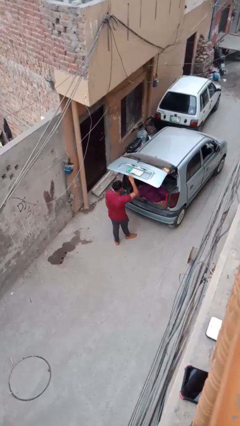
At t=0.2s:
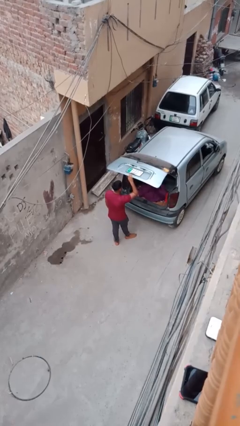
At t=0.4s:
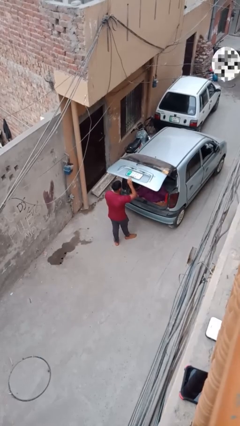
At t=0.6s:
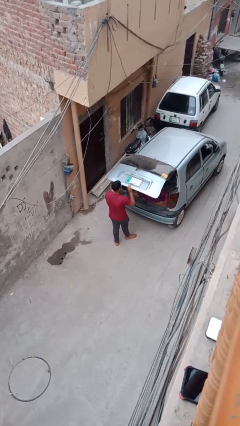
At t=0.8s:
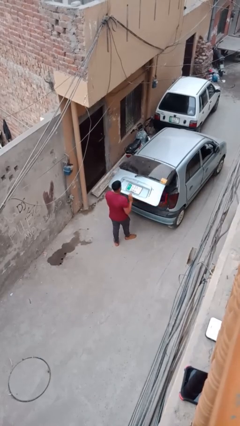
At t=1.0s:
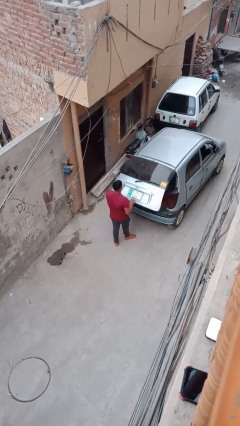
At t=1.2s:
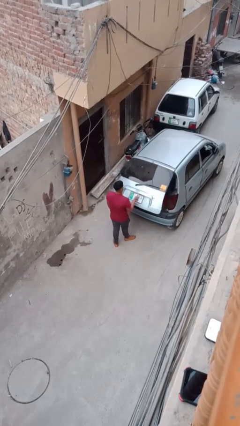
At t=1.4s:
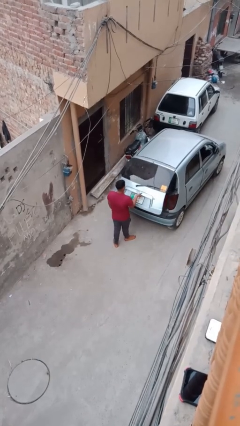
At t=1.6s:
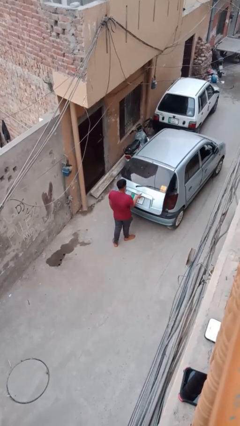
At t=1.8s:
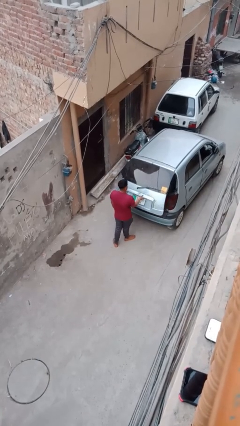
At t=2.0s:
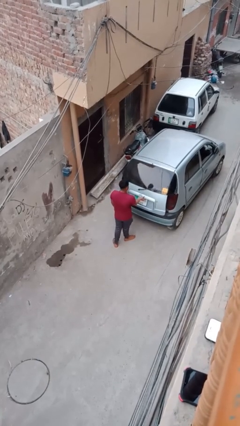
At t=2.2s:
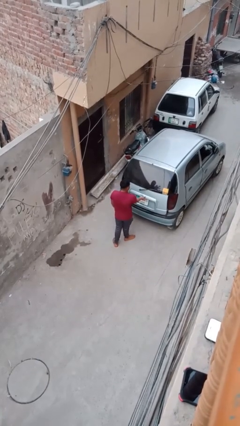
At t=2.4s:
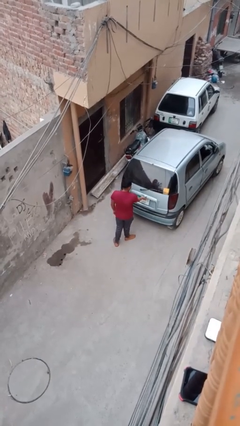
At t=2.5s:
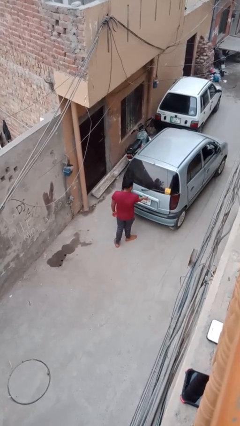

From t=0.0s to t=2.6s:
person closes car trunk

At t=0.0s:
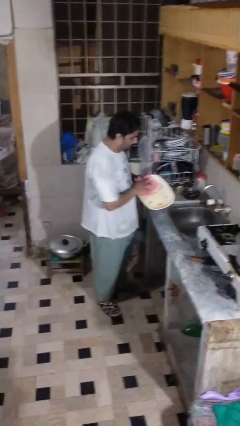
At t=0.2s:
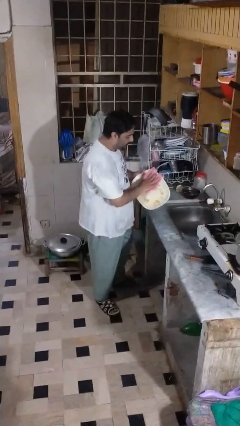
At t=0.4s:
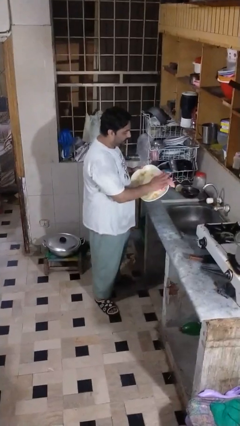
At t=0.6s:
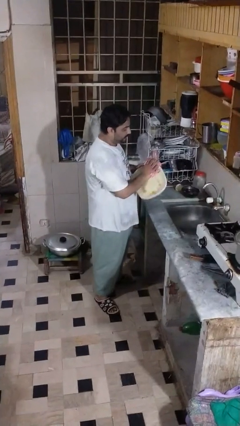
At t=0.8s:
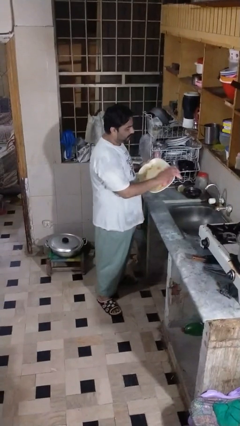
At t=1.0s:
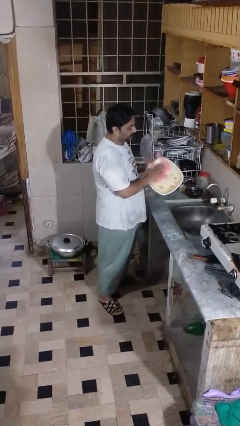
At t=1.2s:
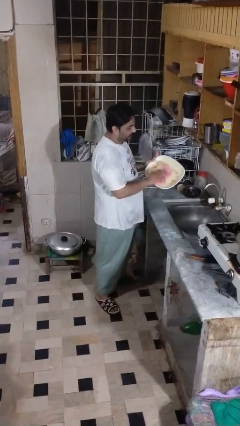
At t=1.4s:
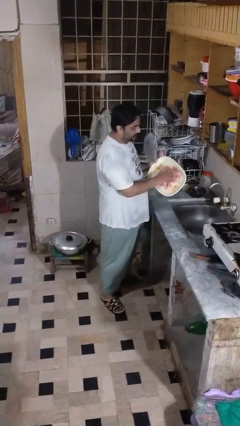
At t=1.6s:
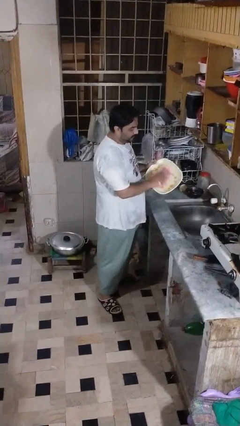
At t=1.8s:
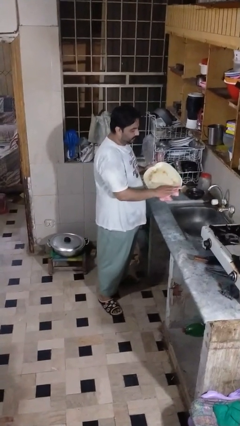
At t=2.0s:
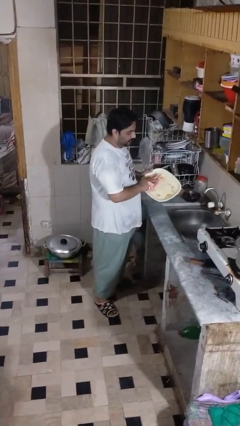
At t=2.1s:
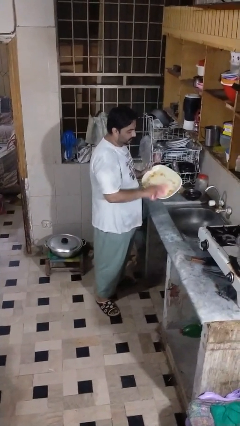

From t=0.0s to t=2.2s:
person dries dish

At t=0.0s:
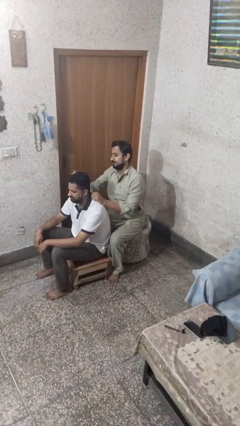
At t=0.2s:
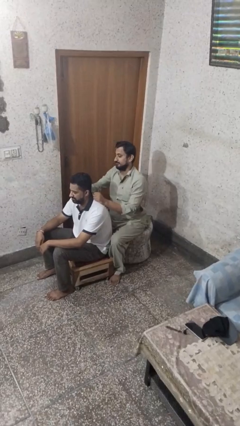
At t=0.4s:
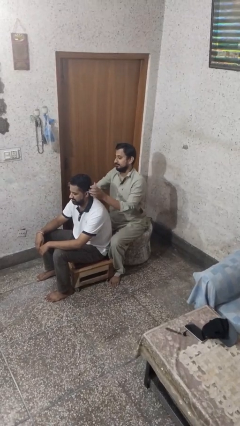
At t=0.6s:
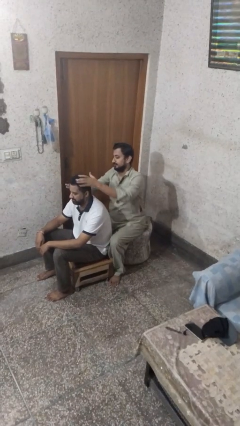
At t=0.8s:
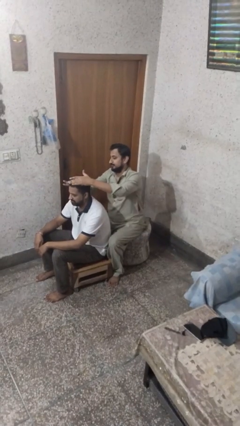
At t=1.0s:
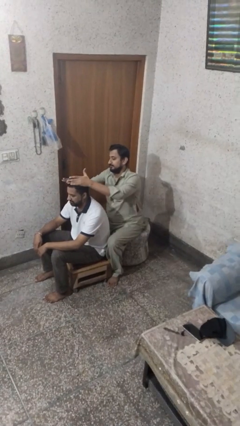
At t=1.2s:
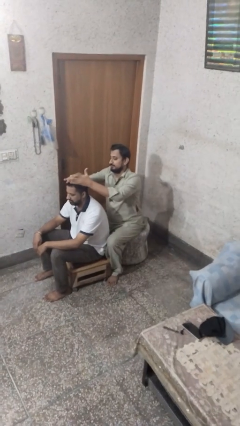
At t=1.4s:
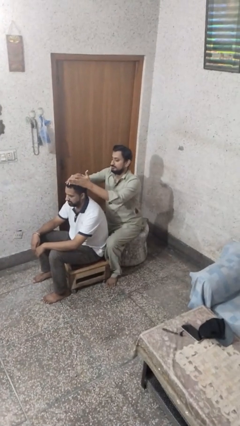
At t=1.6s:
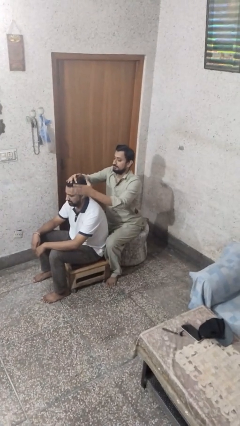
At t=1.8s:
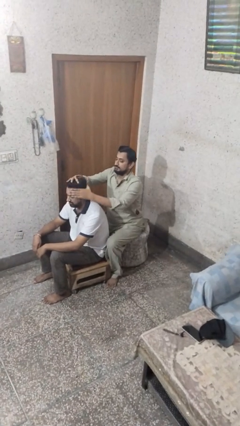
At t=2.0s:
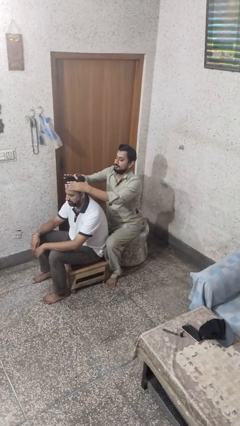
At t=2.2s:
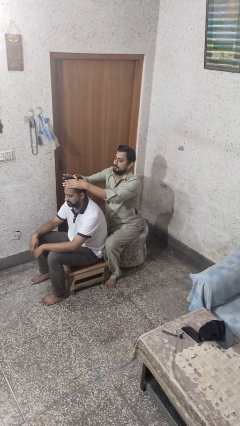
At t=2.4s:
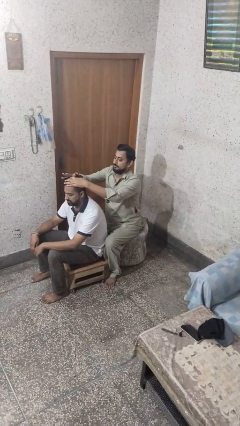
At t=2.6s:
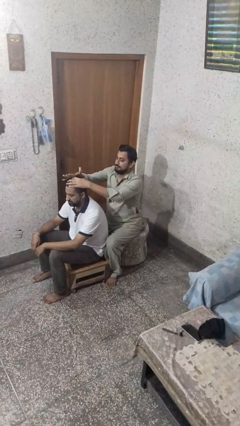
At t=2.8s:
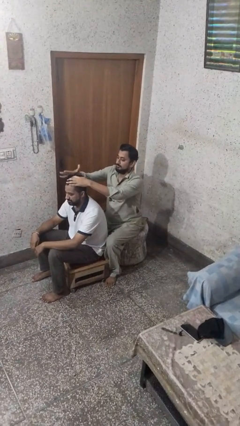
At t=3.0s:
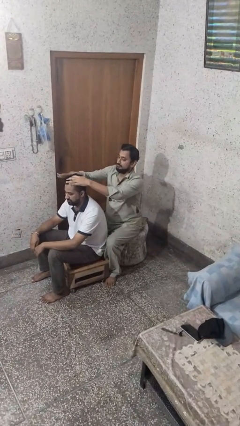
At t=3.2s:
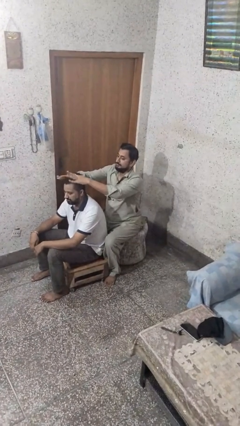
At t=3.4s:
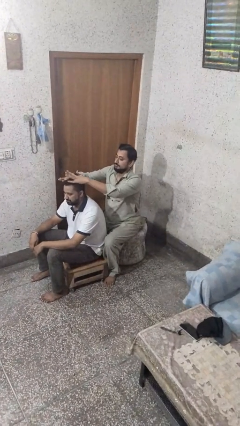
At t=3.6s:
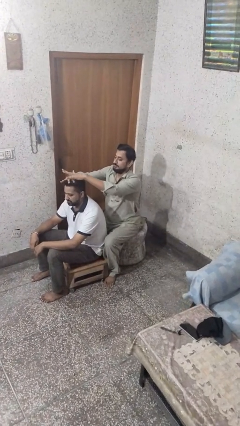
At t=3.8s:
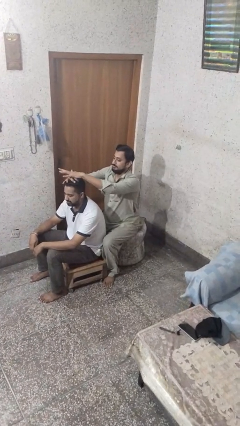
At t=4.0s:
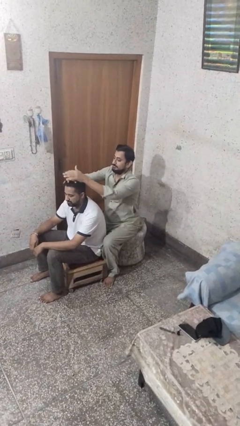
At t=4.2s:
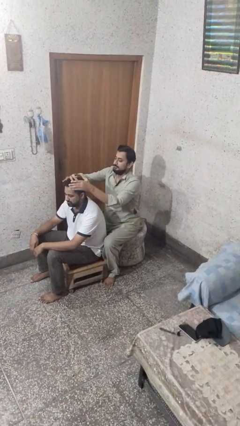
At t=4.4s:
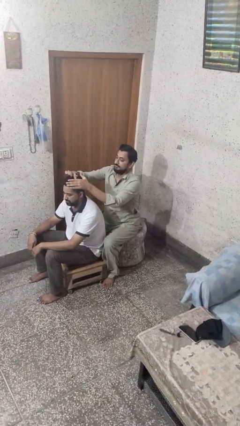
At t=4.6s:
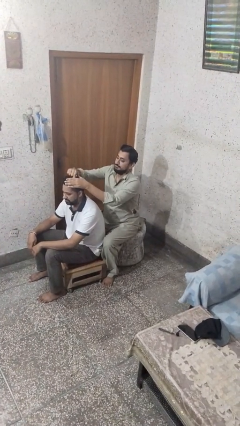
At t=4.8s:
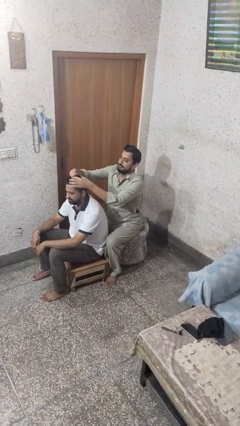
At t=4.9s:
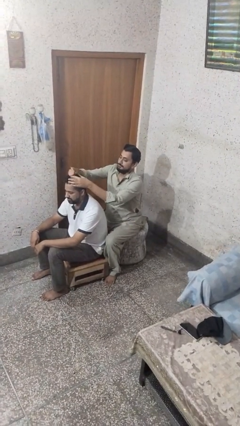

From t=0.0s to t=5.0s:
person braids hair of person

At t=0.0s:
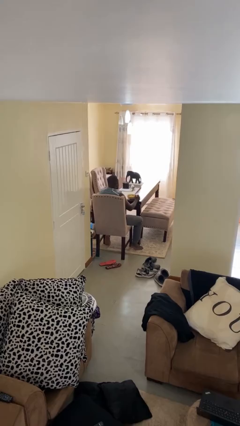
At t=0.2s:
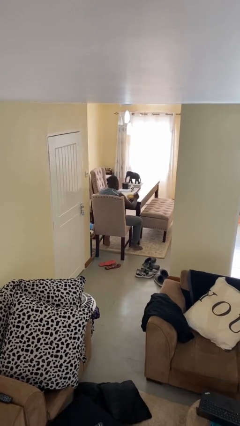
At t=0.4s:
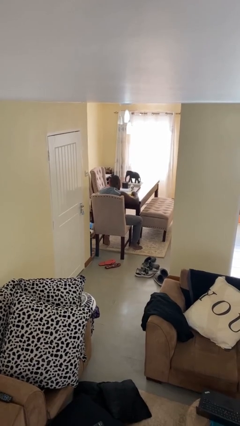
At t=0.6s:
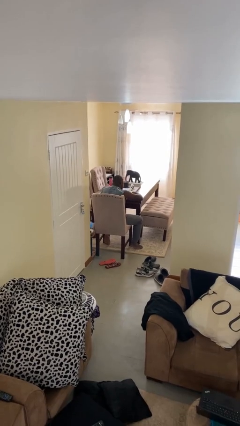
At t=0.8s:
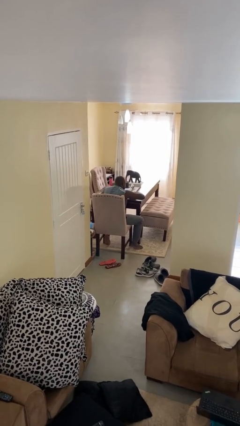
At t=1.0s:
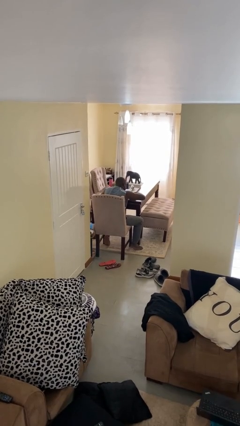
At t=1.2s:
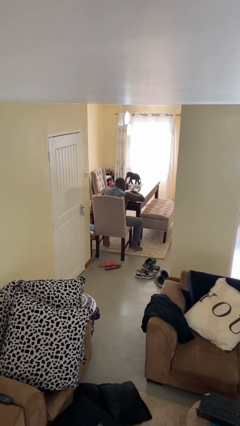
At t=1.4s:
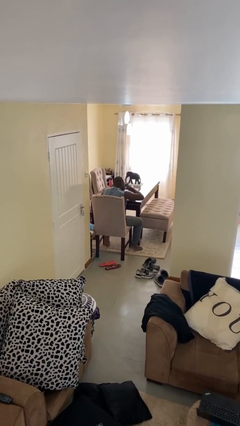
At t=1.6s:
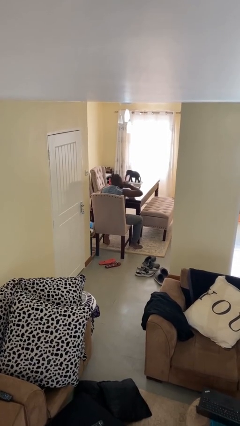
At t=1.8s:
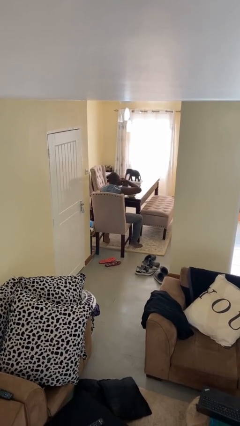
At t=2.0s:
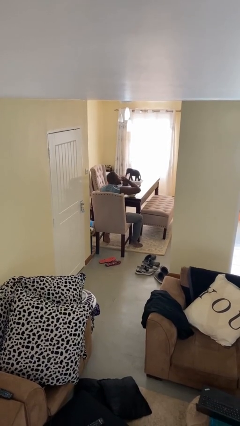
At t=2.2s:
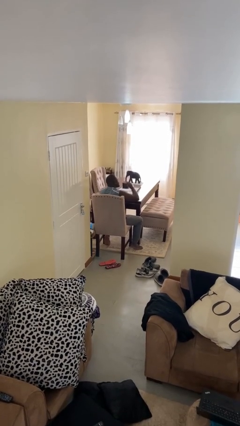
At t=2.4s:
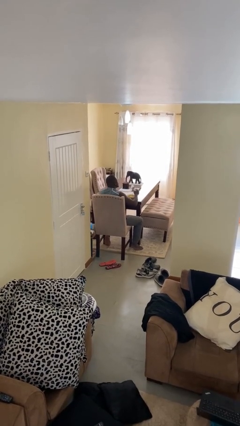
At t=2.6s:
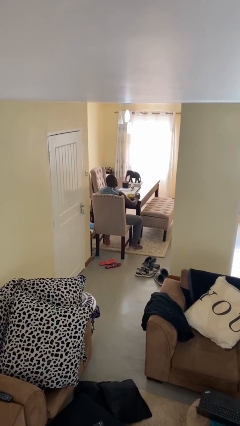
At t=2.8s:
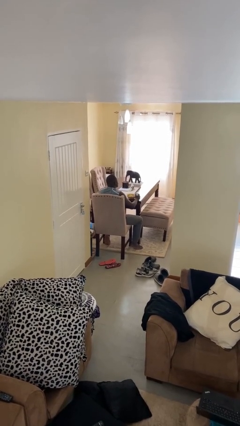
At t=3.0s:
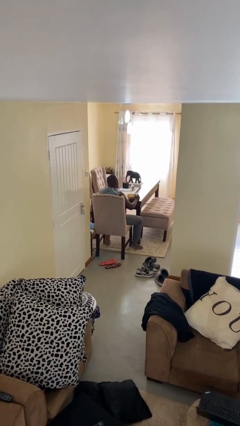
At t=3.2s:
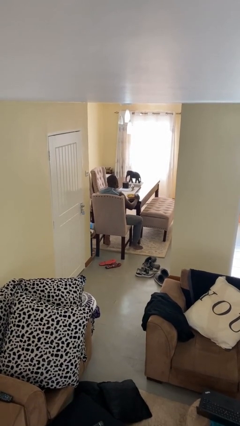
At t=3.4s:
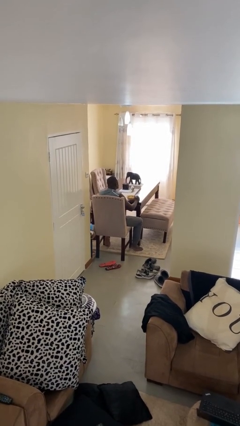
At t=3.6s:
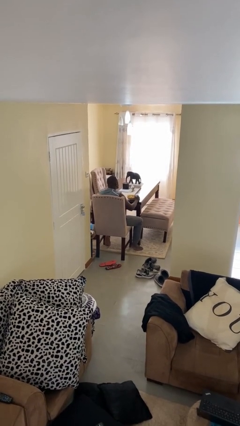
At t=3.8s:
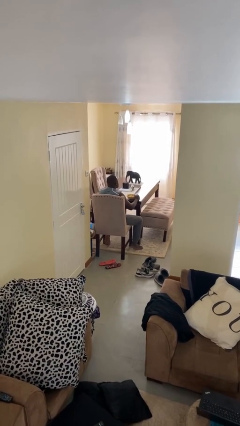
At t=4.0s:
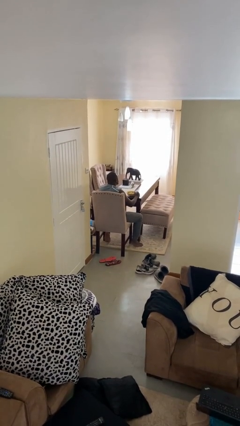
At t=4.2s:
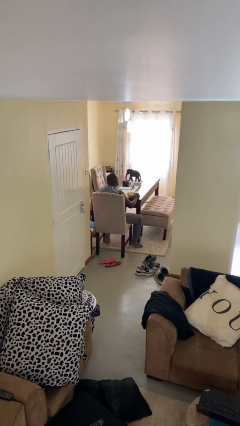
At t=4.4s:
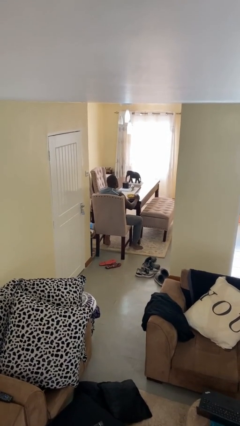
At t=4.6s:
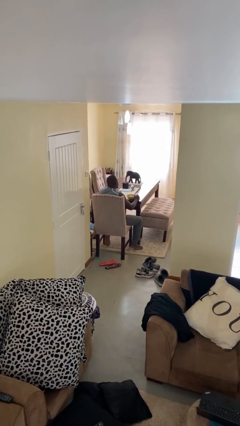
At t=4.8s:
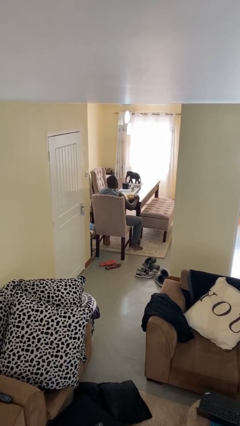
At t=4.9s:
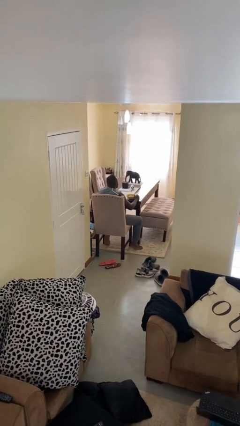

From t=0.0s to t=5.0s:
person eats with hands

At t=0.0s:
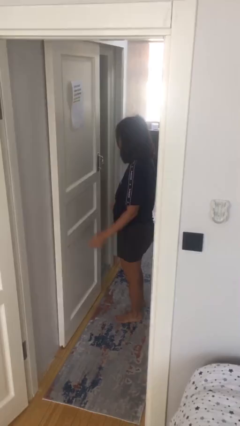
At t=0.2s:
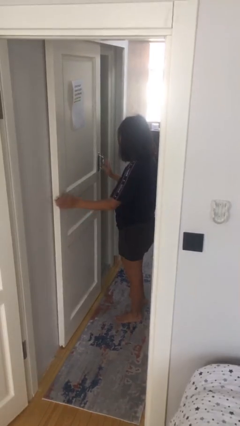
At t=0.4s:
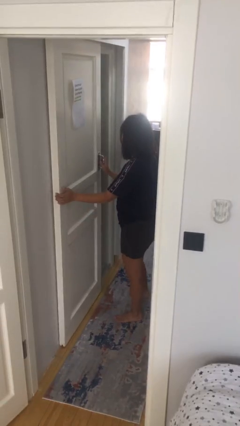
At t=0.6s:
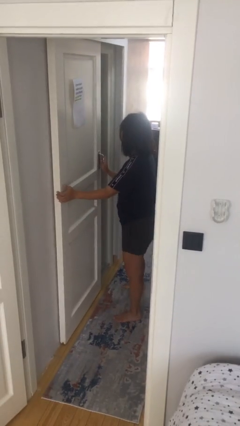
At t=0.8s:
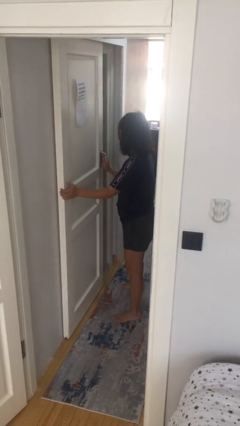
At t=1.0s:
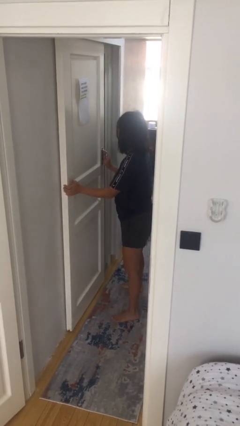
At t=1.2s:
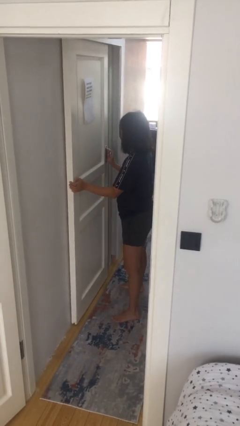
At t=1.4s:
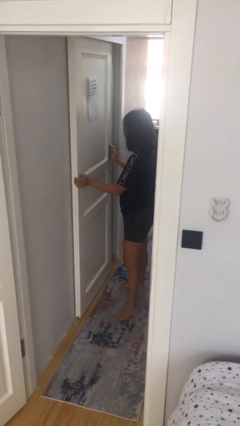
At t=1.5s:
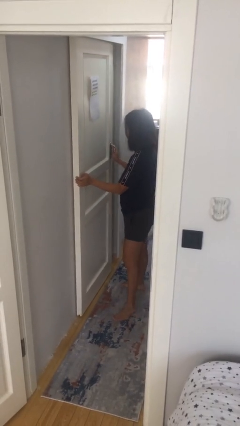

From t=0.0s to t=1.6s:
person closes sliding door

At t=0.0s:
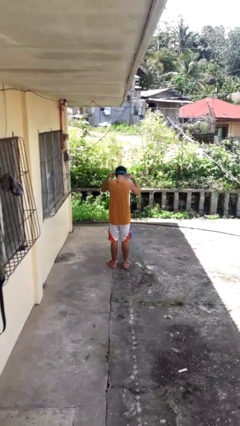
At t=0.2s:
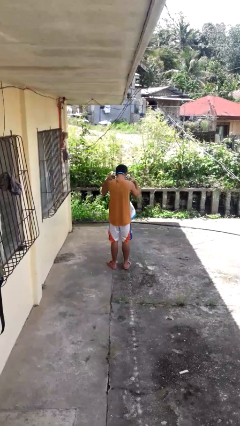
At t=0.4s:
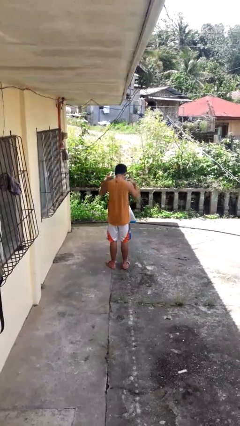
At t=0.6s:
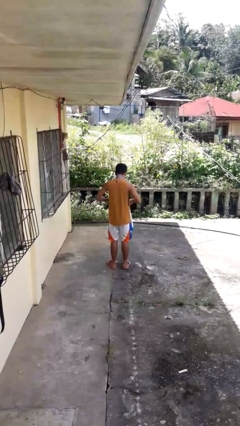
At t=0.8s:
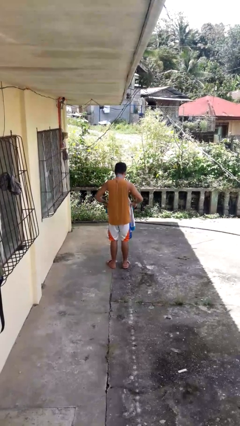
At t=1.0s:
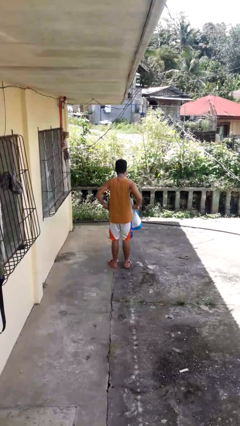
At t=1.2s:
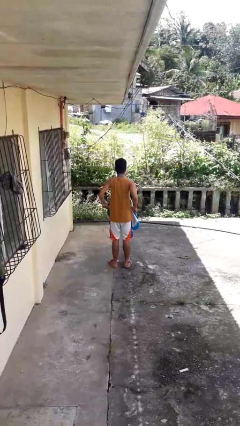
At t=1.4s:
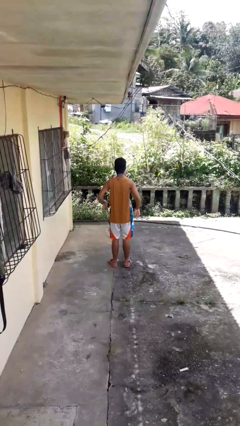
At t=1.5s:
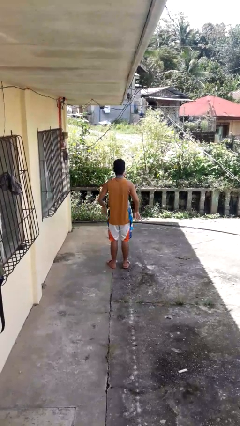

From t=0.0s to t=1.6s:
person puts on apron
